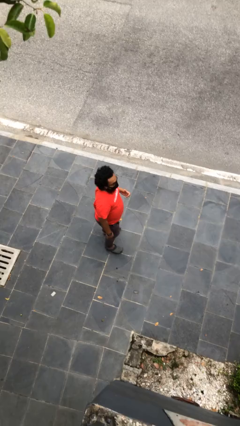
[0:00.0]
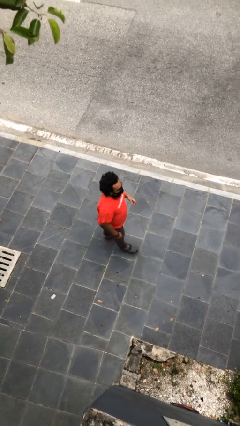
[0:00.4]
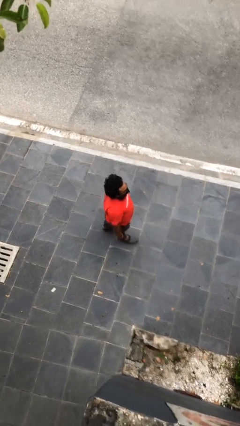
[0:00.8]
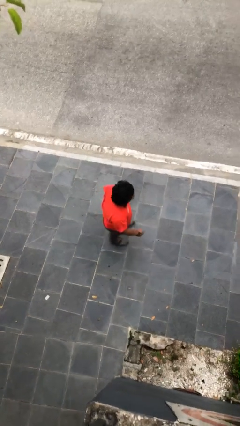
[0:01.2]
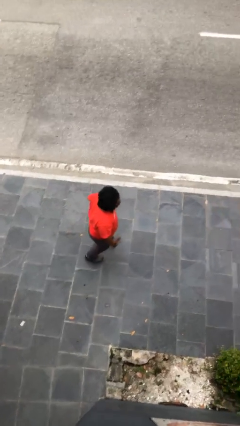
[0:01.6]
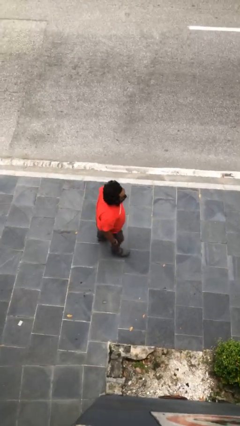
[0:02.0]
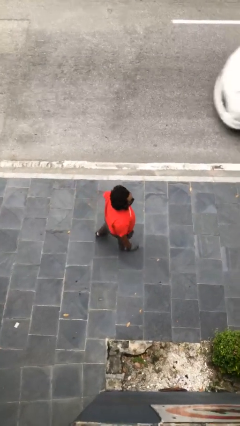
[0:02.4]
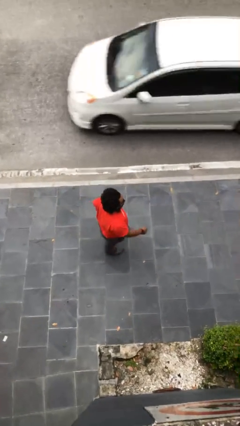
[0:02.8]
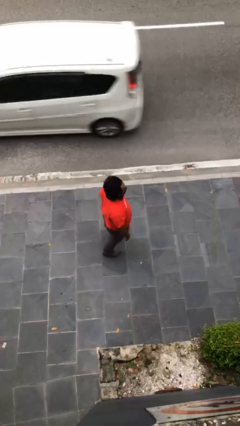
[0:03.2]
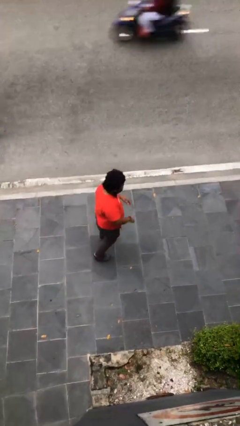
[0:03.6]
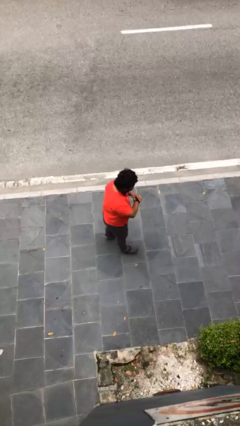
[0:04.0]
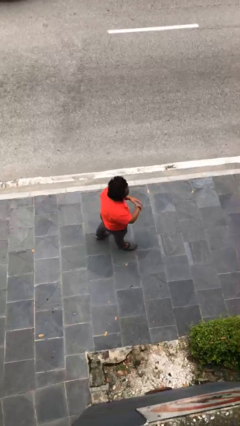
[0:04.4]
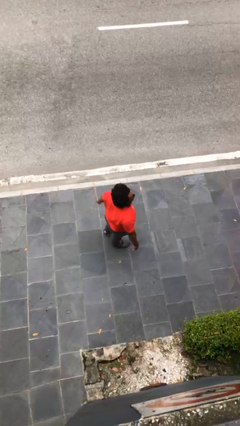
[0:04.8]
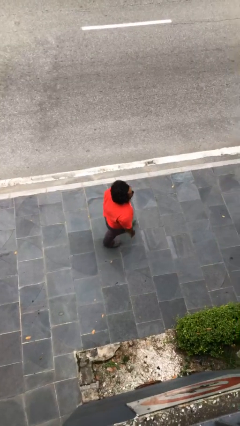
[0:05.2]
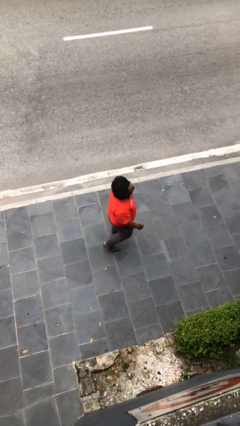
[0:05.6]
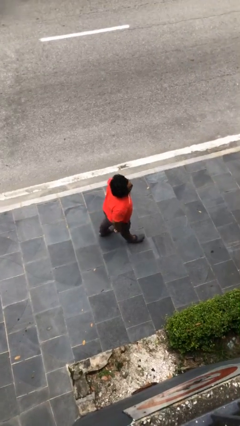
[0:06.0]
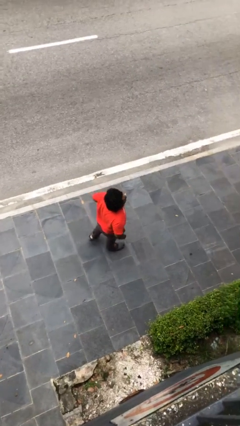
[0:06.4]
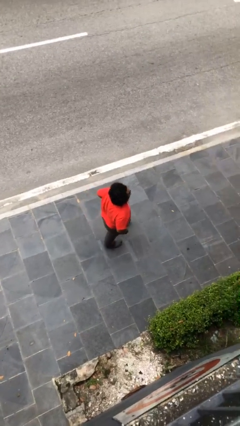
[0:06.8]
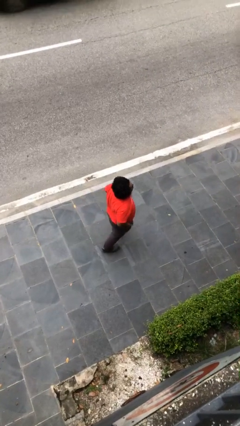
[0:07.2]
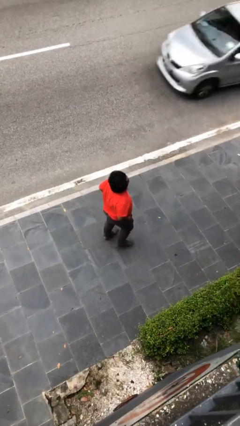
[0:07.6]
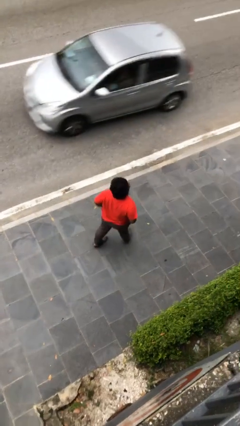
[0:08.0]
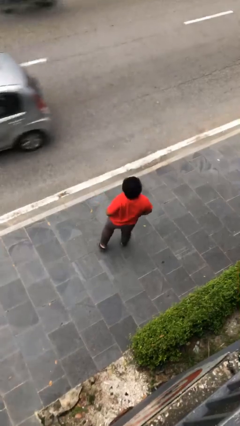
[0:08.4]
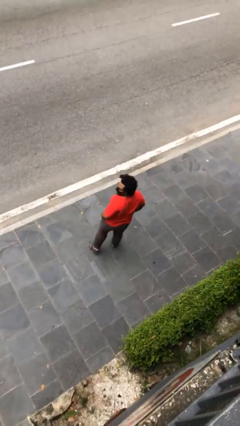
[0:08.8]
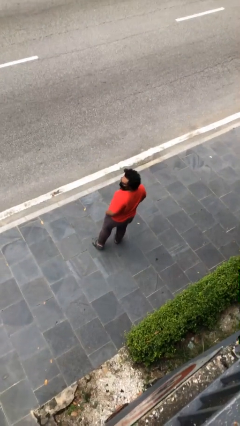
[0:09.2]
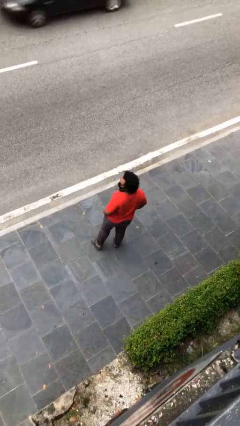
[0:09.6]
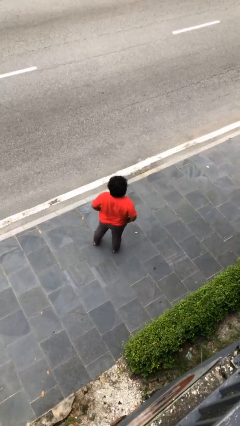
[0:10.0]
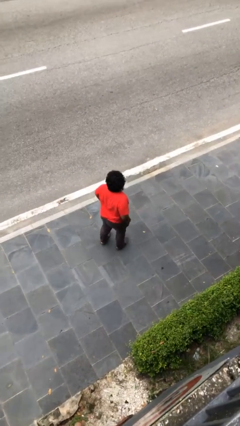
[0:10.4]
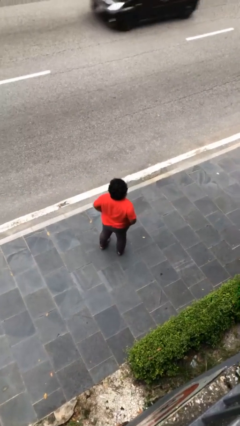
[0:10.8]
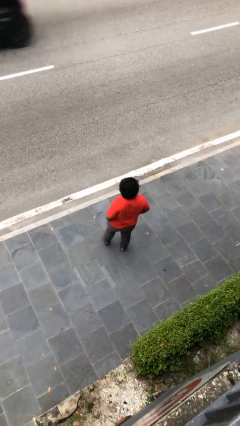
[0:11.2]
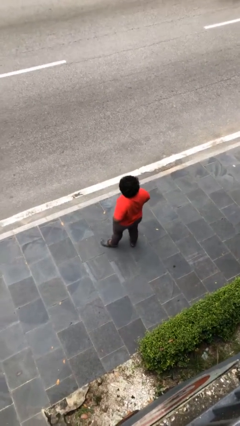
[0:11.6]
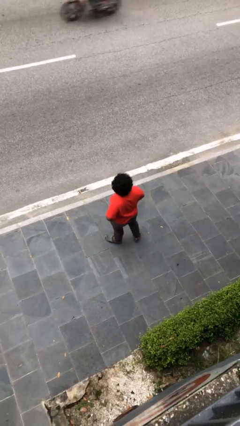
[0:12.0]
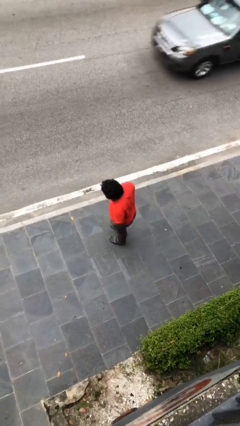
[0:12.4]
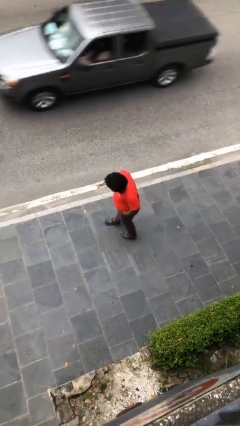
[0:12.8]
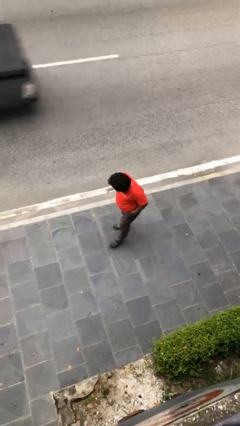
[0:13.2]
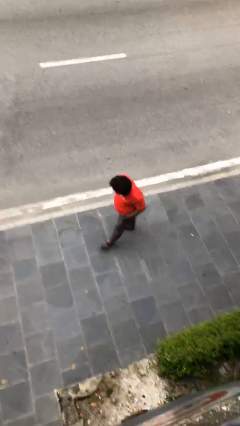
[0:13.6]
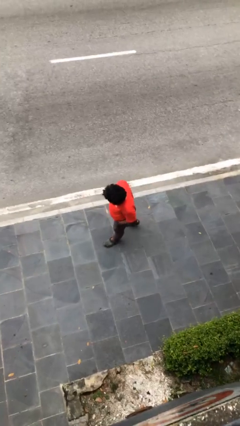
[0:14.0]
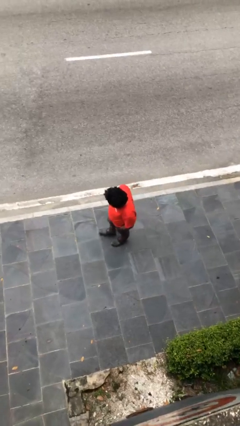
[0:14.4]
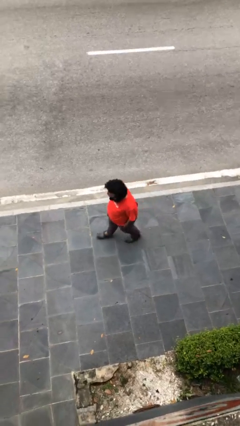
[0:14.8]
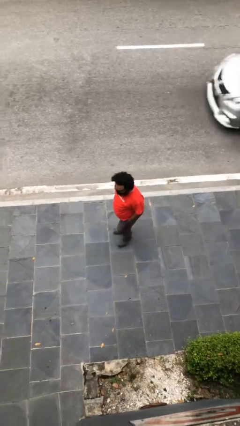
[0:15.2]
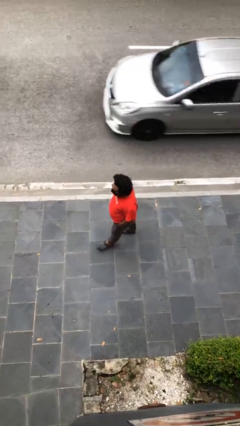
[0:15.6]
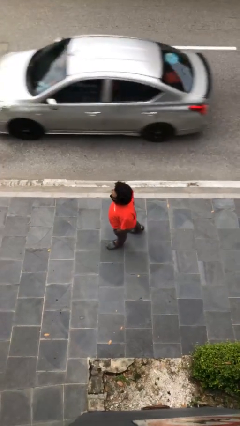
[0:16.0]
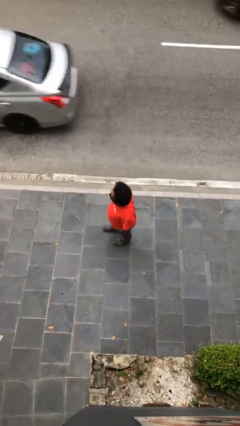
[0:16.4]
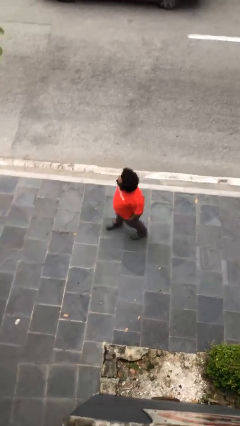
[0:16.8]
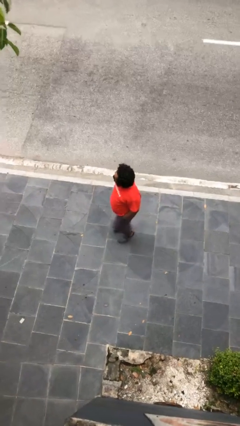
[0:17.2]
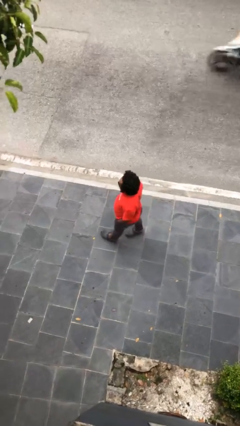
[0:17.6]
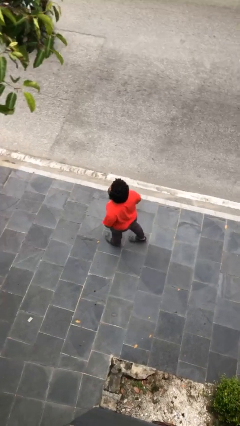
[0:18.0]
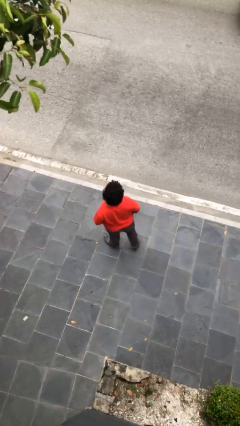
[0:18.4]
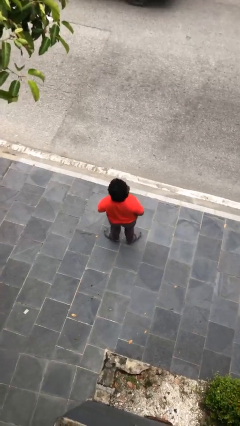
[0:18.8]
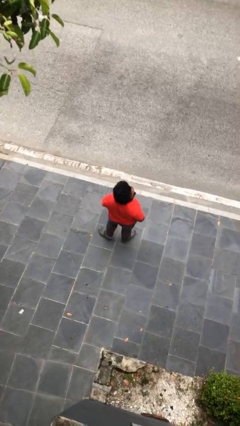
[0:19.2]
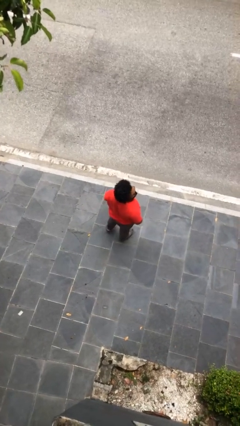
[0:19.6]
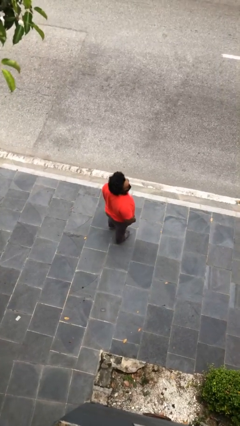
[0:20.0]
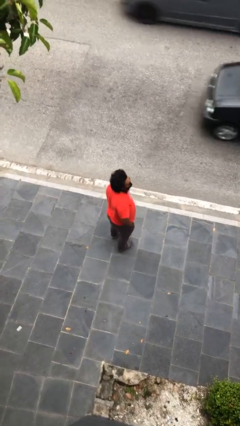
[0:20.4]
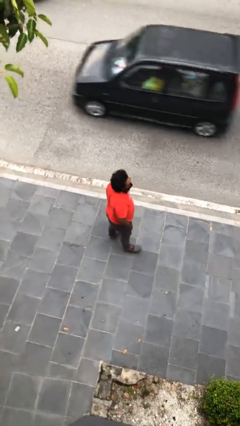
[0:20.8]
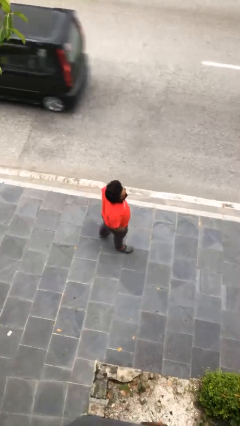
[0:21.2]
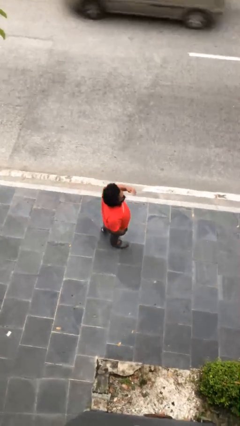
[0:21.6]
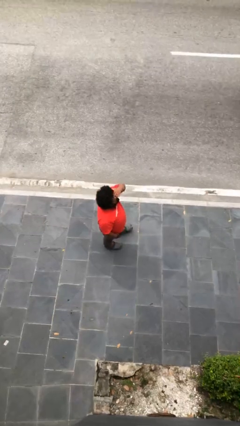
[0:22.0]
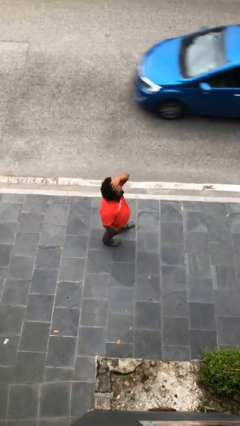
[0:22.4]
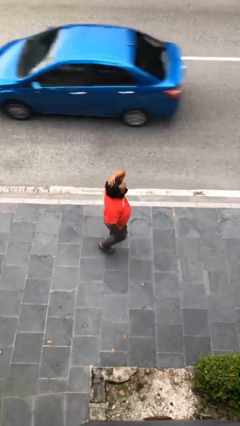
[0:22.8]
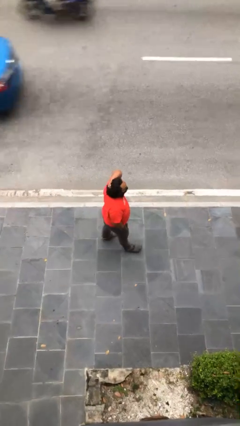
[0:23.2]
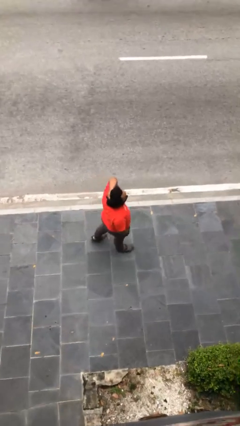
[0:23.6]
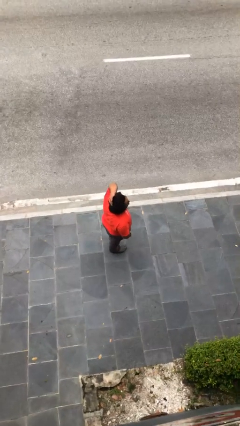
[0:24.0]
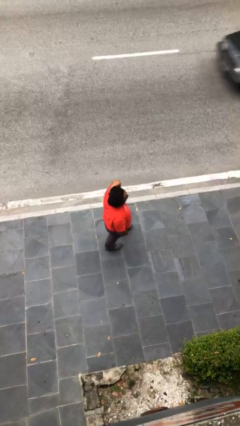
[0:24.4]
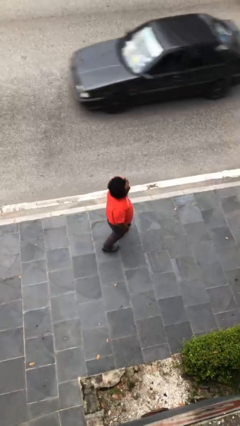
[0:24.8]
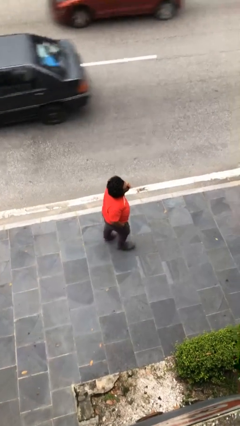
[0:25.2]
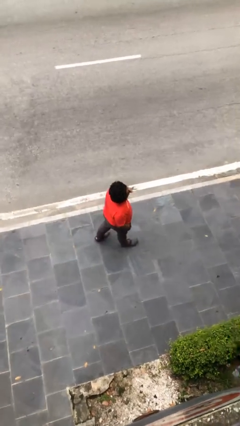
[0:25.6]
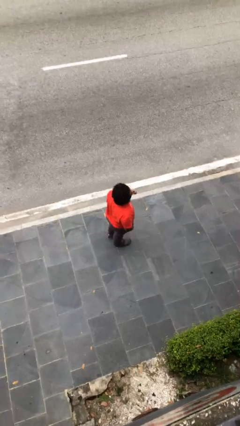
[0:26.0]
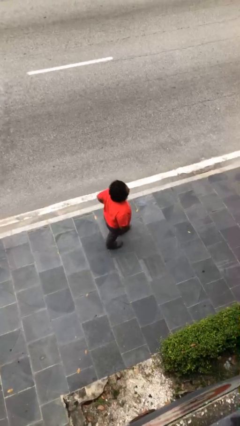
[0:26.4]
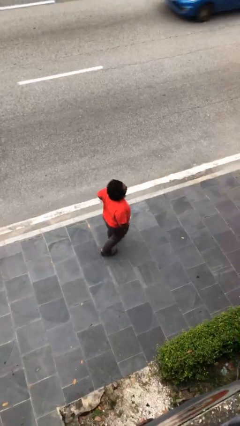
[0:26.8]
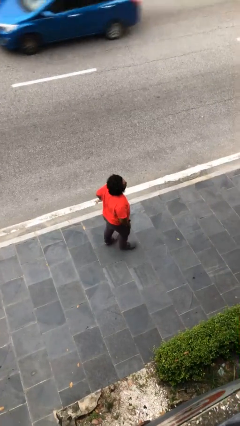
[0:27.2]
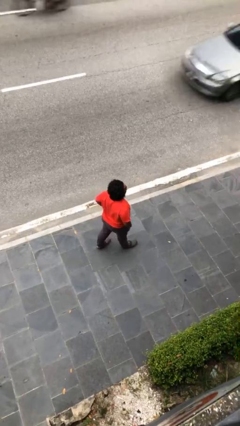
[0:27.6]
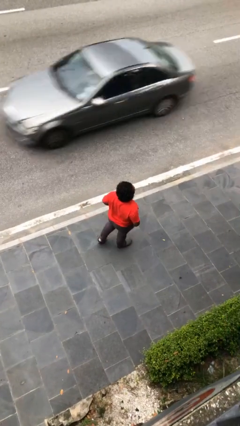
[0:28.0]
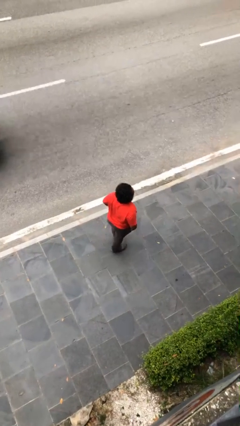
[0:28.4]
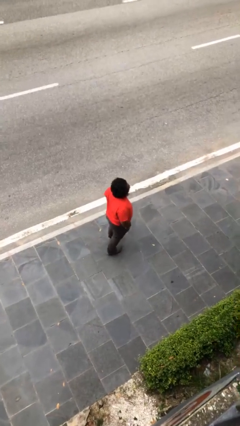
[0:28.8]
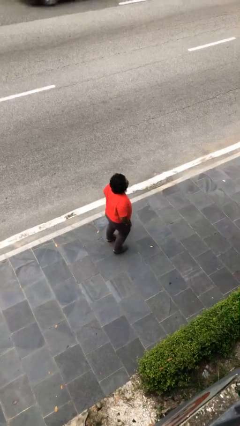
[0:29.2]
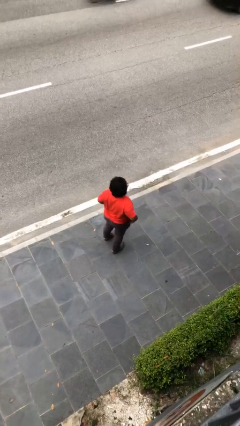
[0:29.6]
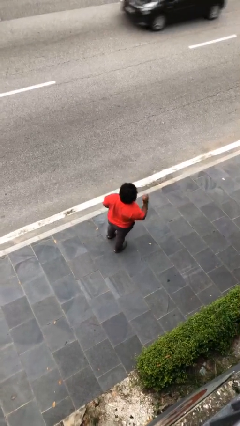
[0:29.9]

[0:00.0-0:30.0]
person walks

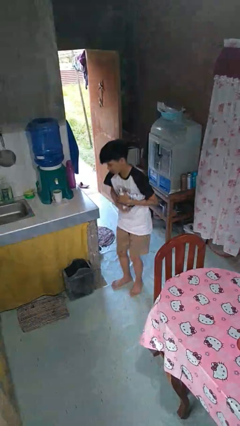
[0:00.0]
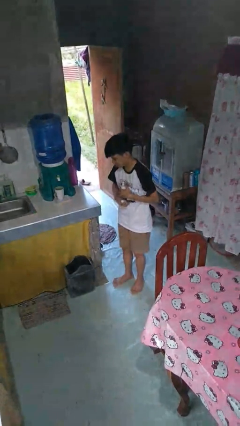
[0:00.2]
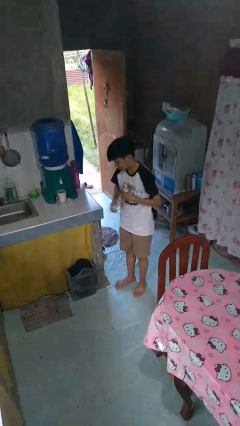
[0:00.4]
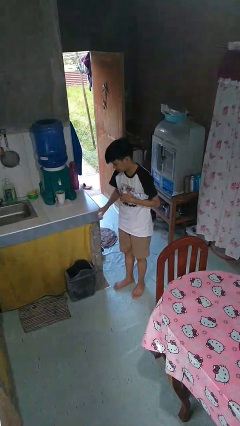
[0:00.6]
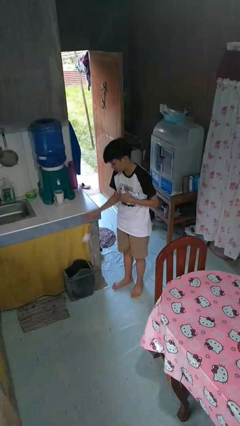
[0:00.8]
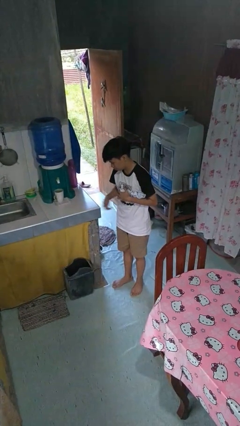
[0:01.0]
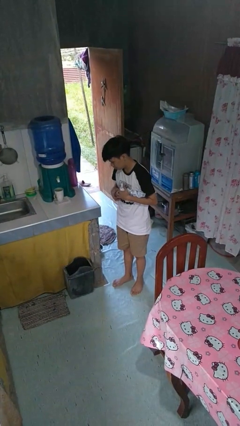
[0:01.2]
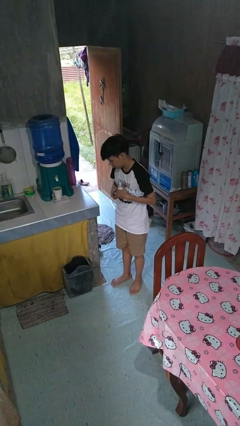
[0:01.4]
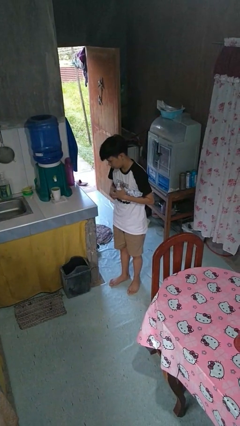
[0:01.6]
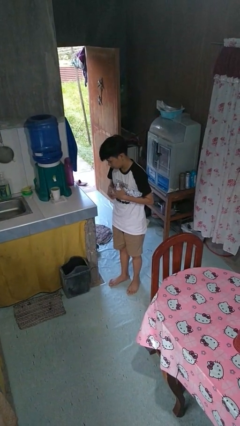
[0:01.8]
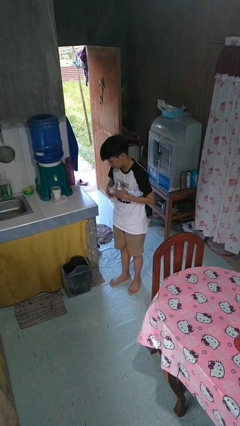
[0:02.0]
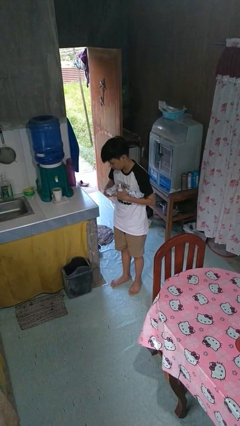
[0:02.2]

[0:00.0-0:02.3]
person discards trash

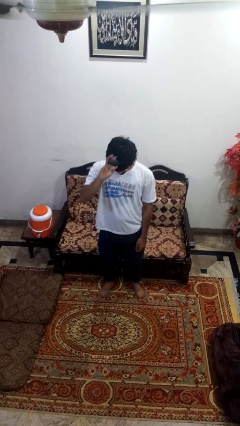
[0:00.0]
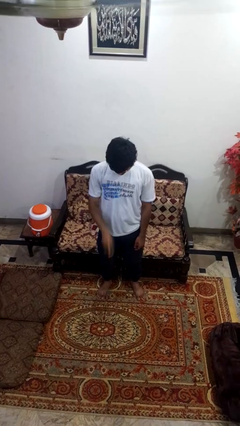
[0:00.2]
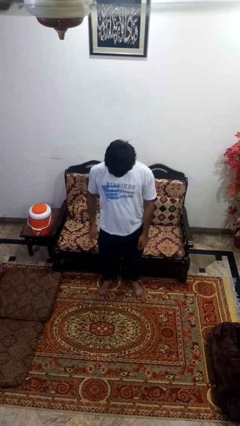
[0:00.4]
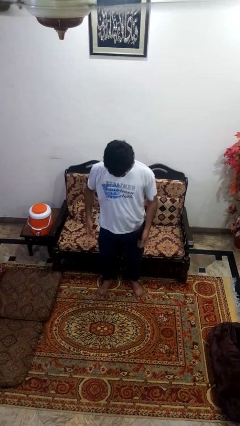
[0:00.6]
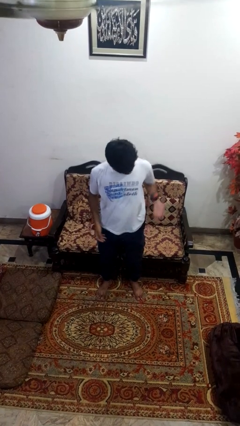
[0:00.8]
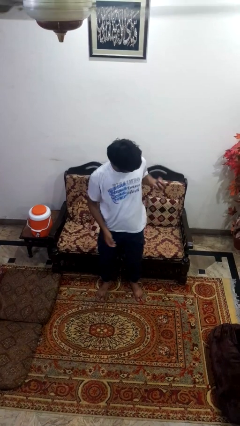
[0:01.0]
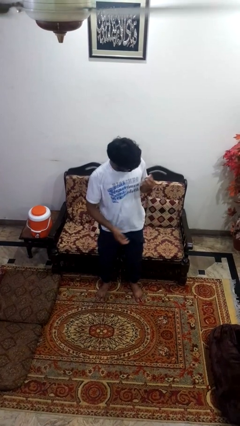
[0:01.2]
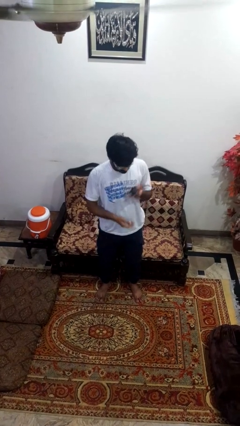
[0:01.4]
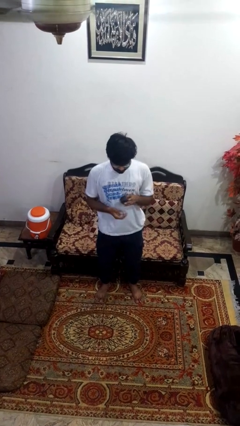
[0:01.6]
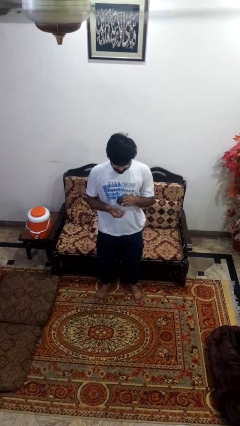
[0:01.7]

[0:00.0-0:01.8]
person bounces ball on floor
